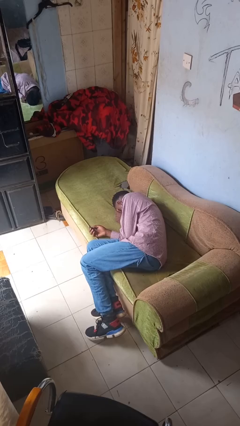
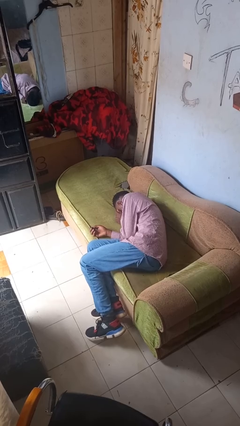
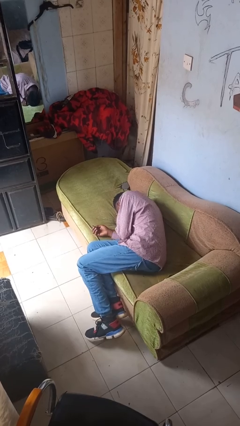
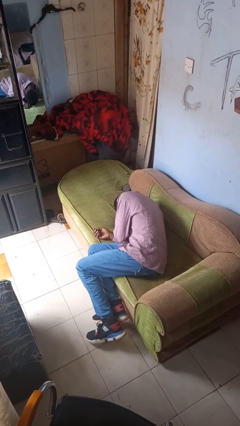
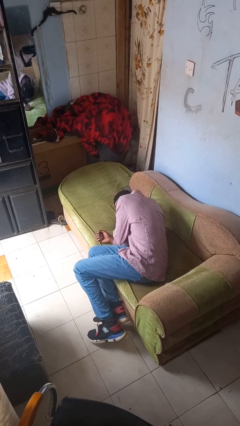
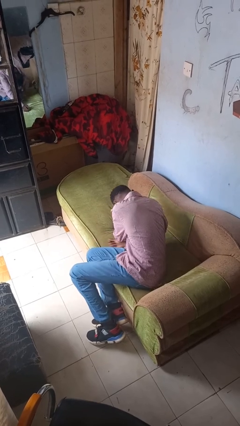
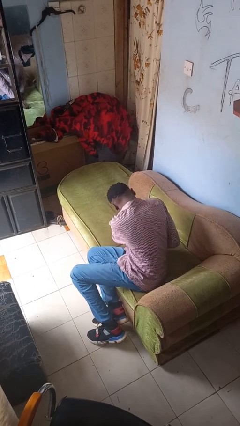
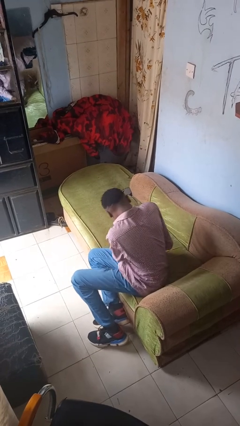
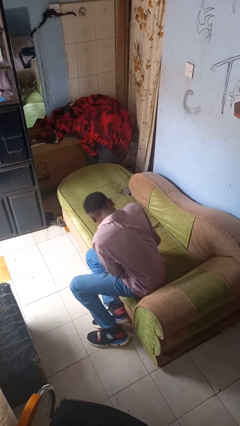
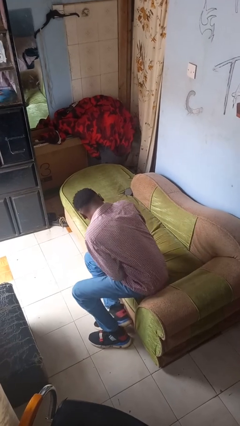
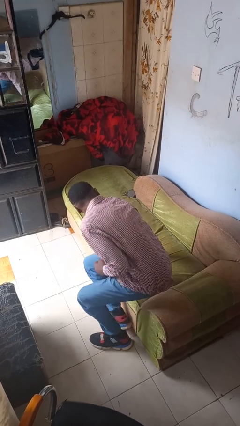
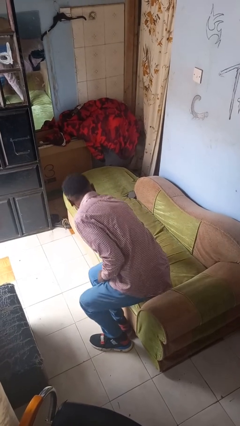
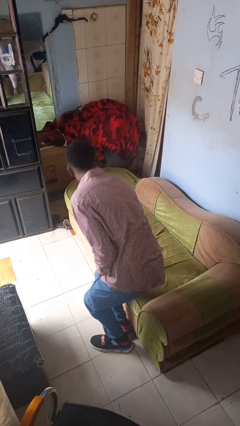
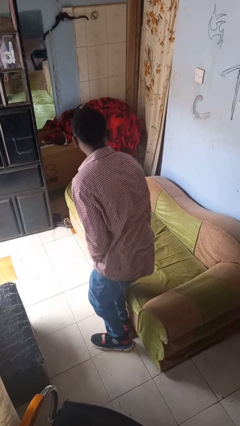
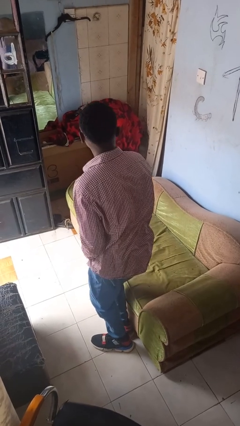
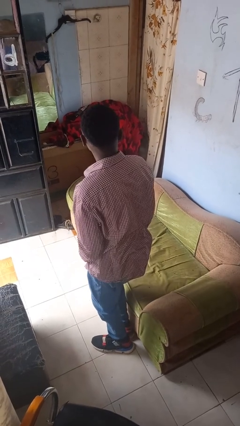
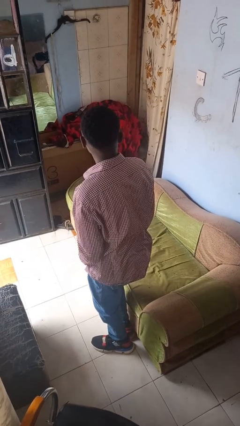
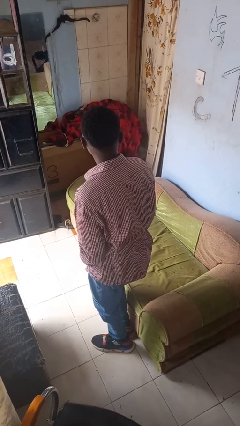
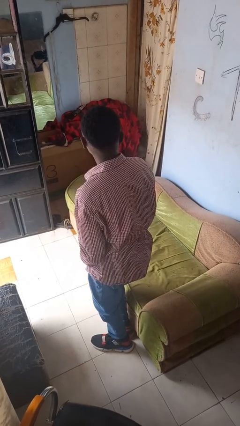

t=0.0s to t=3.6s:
person stands up

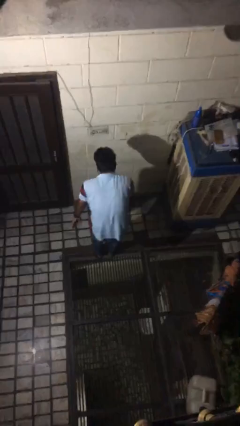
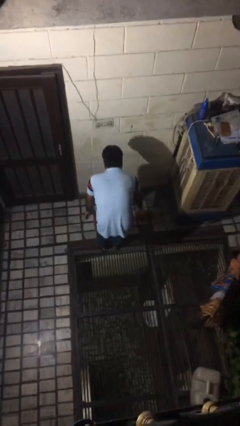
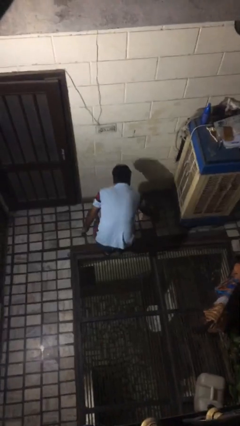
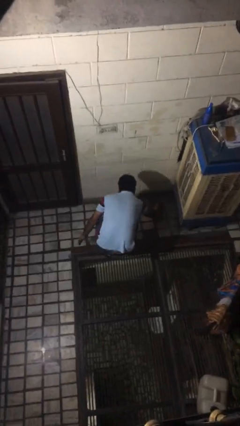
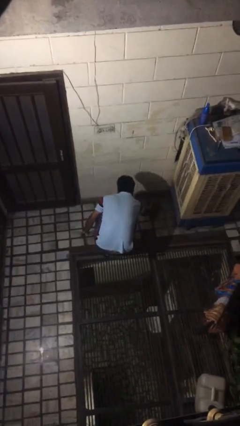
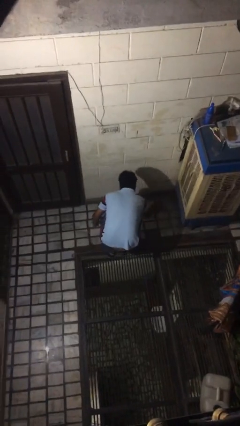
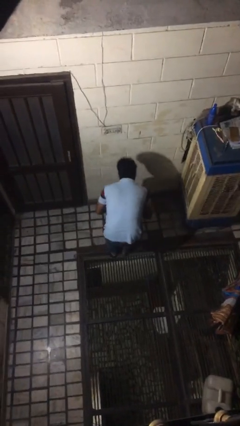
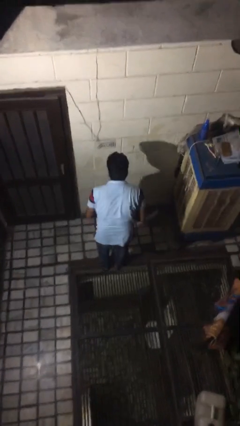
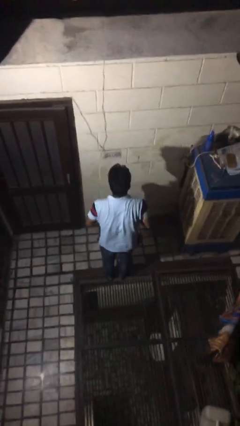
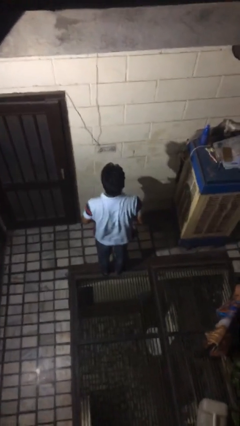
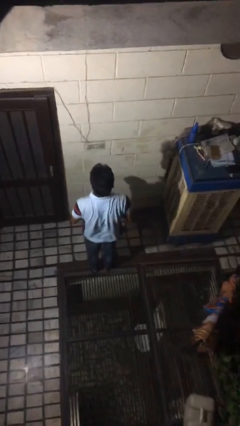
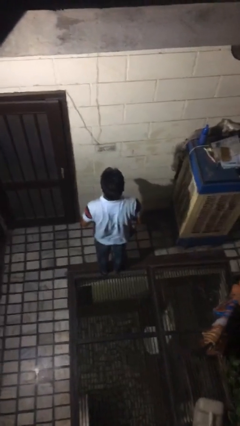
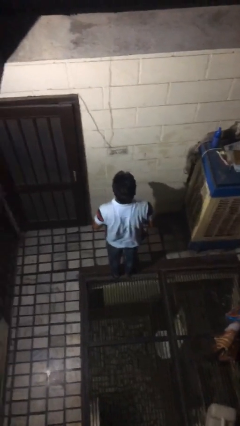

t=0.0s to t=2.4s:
person picks up object from floor

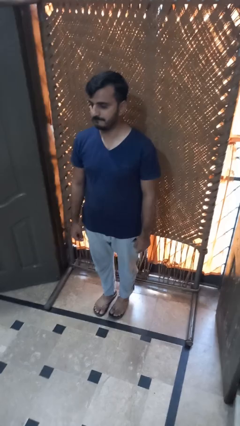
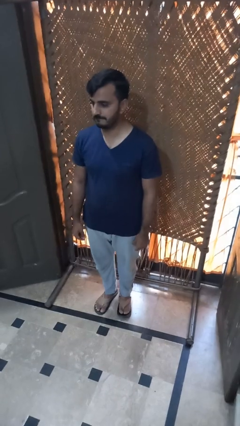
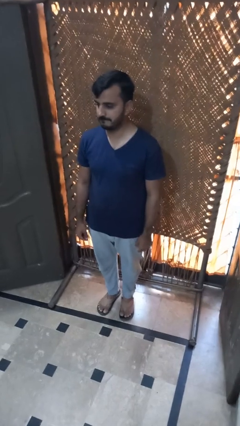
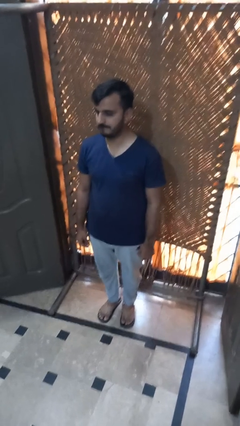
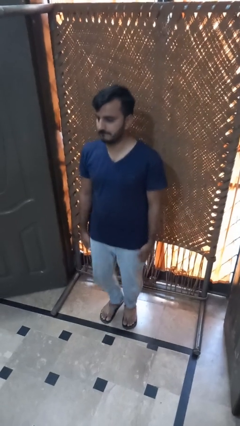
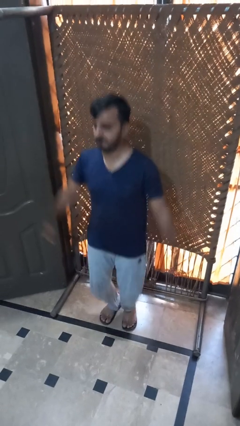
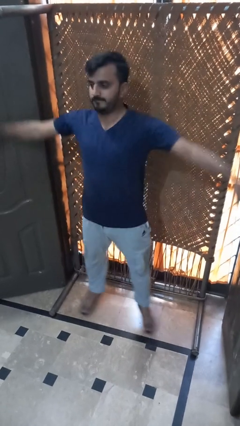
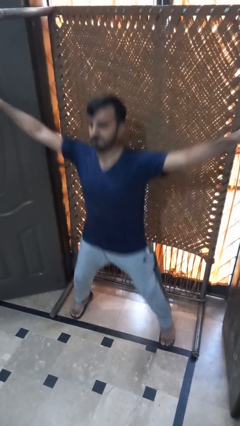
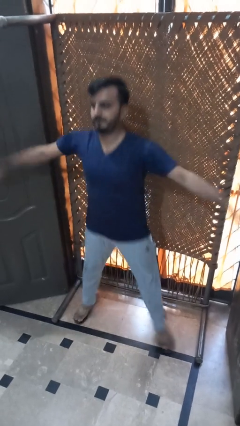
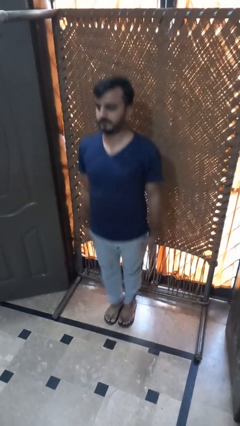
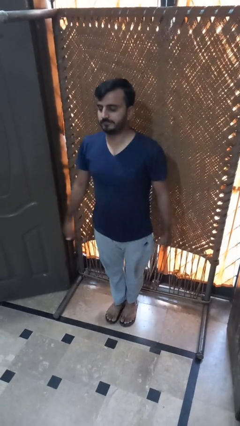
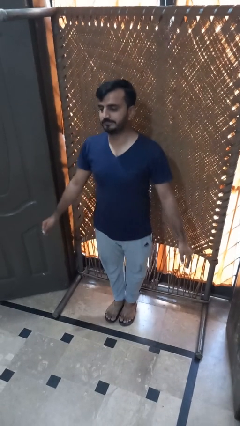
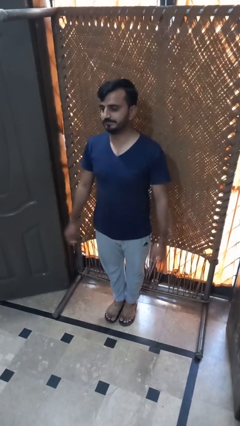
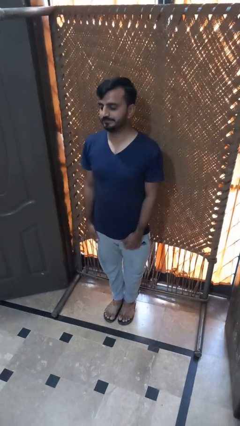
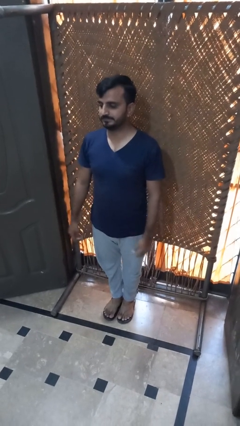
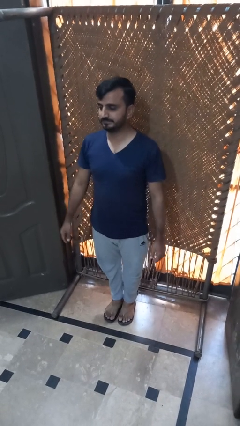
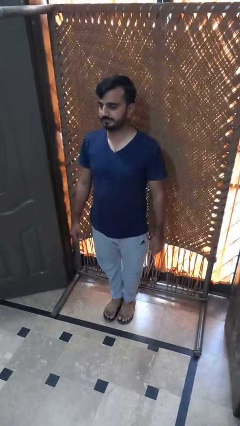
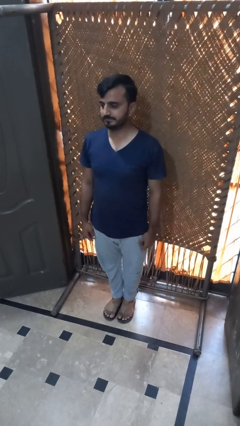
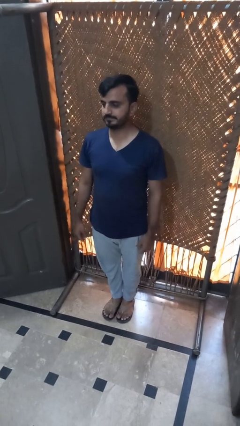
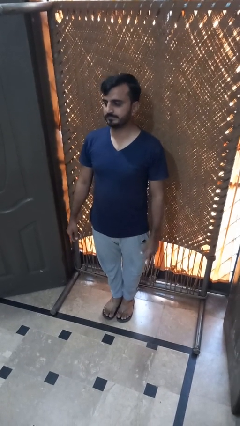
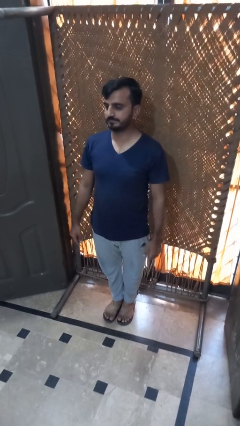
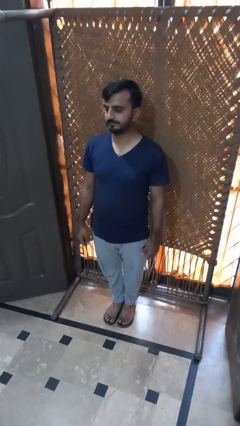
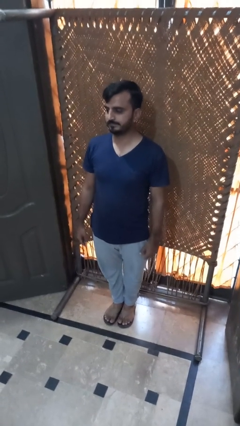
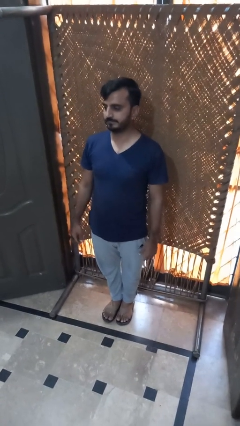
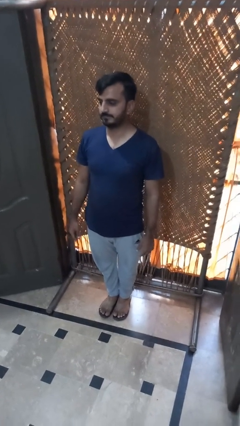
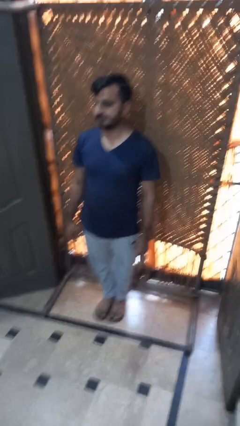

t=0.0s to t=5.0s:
person exercises with jumping jacks

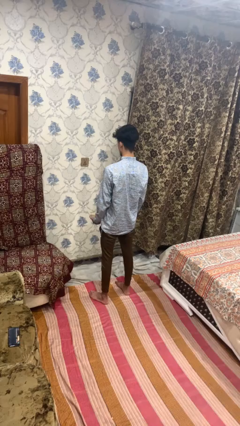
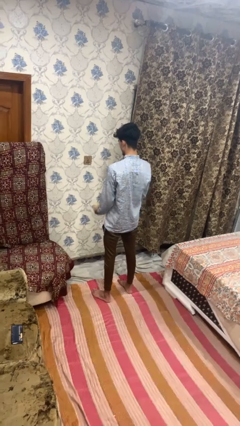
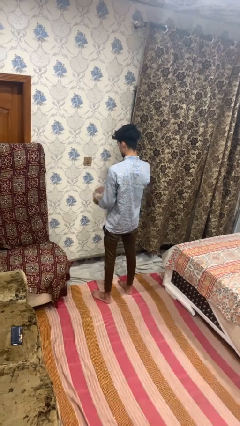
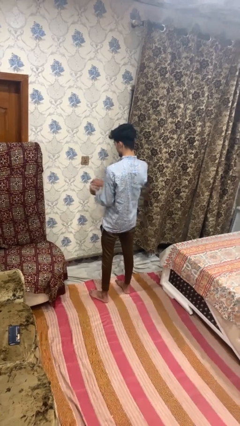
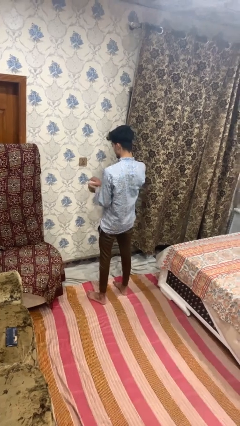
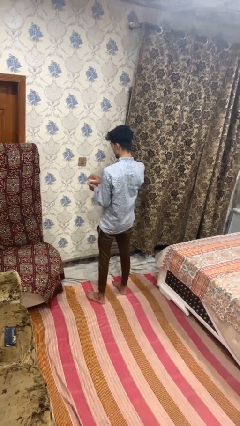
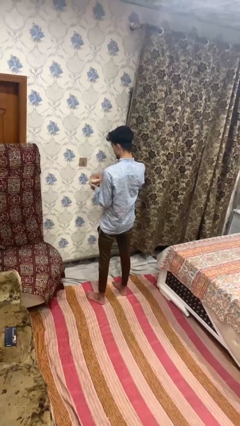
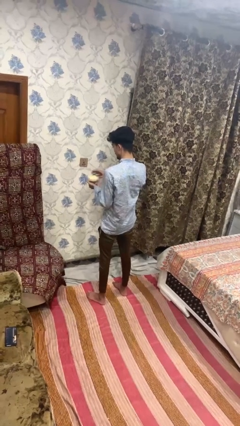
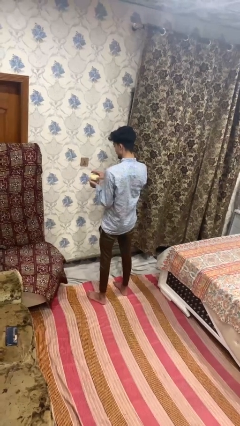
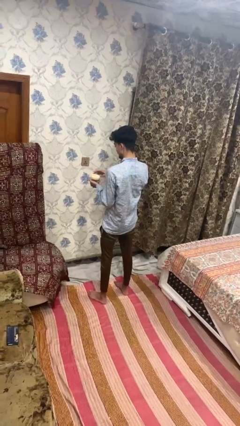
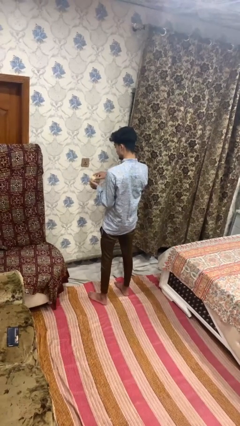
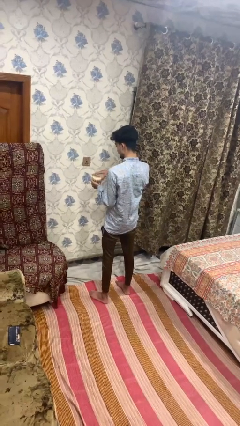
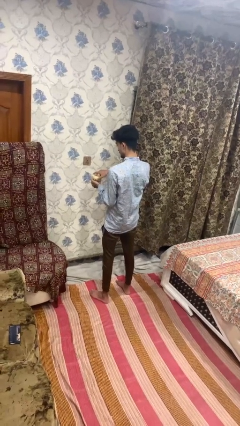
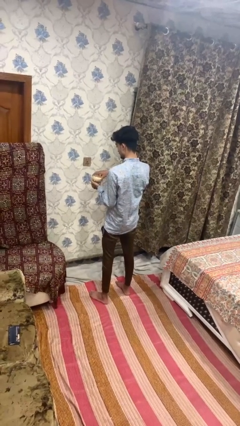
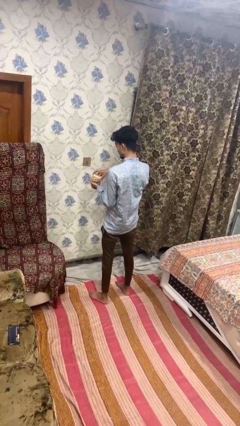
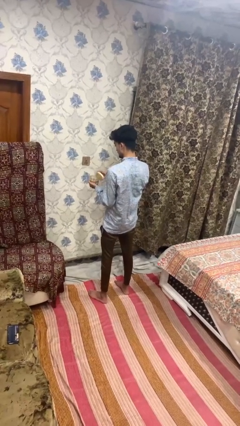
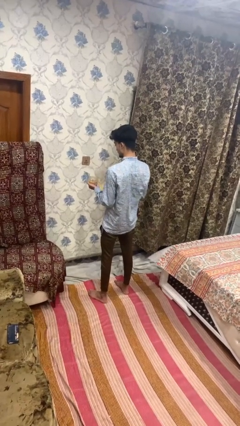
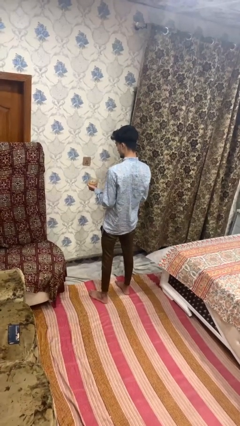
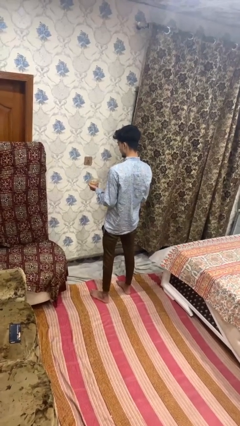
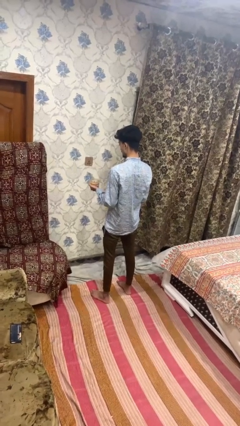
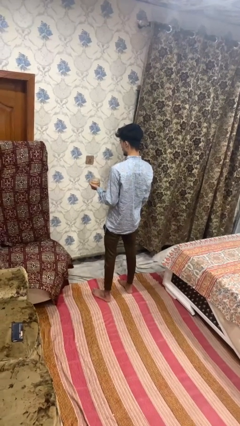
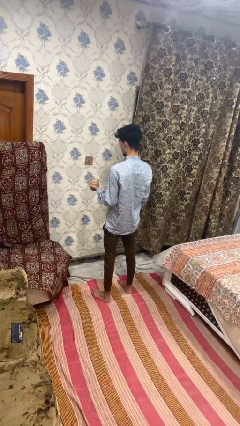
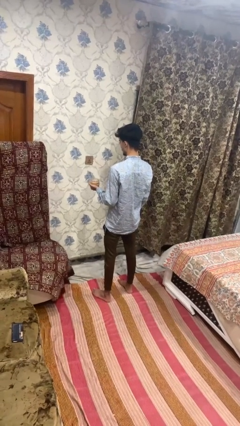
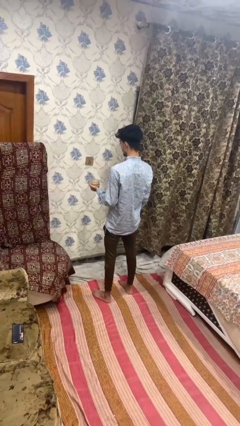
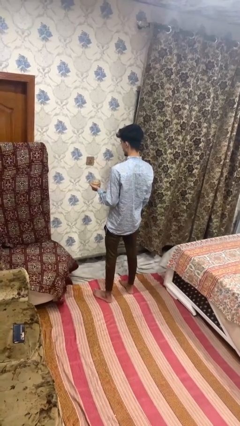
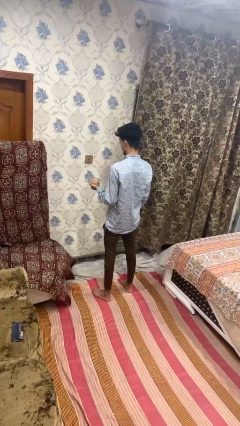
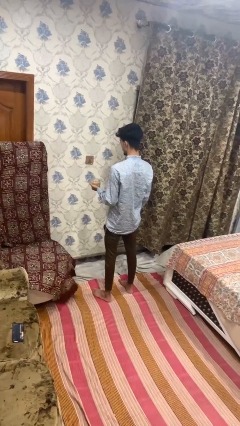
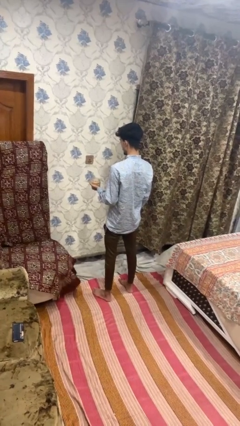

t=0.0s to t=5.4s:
person opens jar

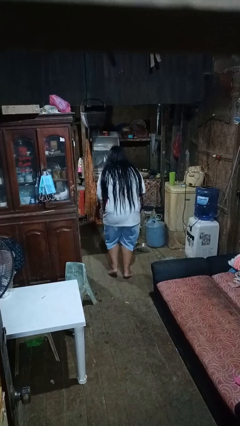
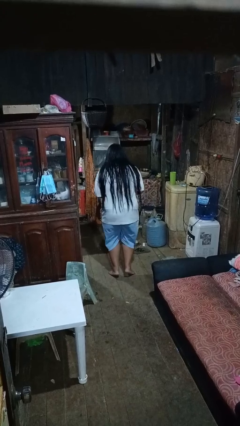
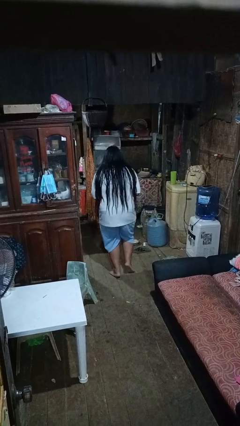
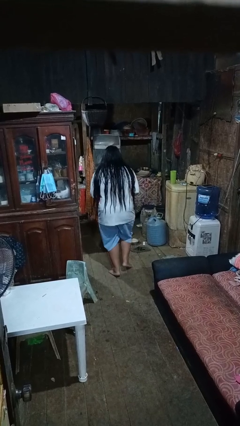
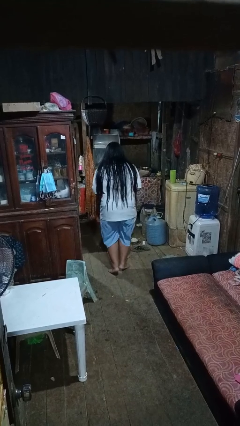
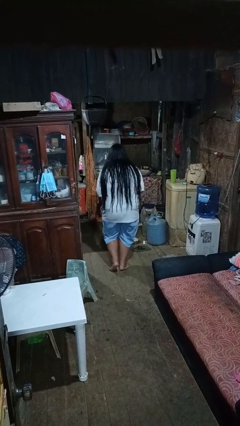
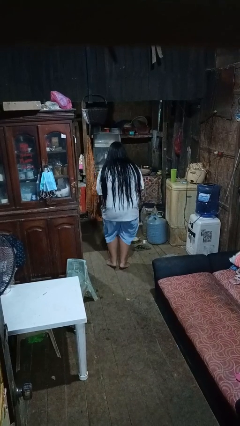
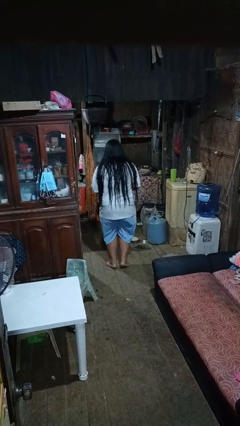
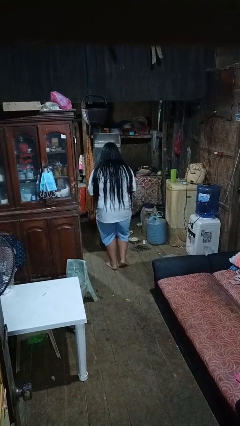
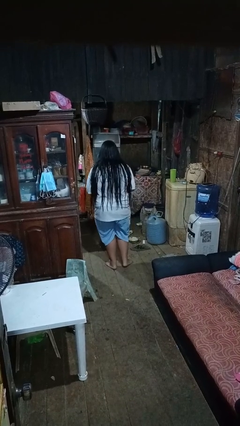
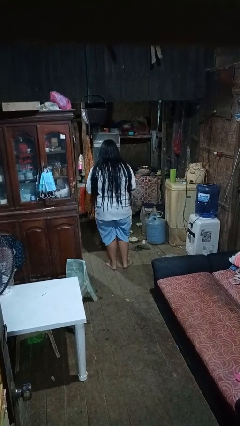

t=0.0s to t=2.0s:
person walks tiptoe
